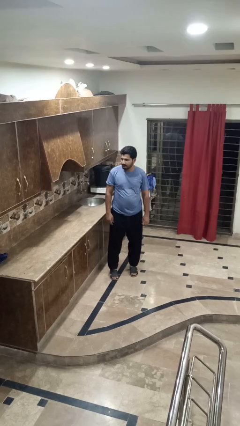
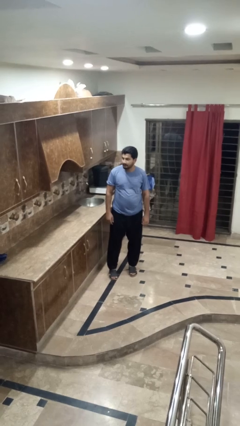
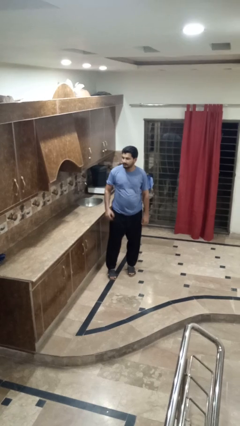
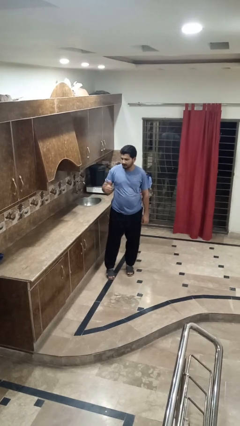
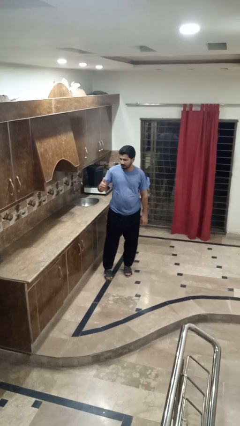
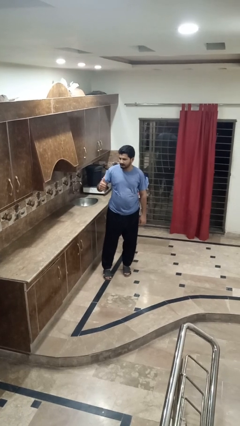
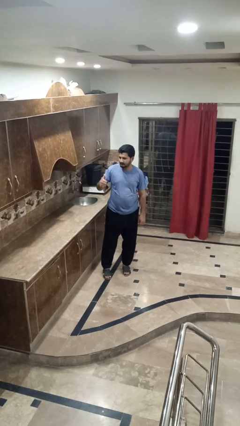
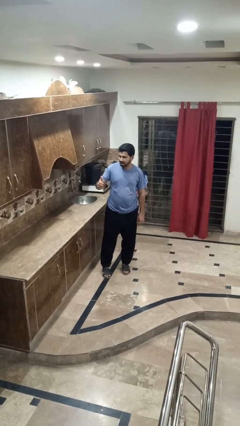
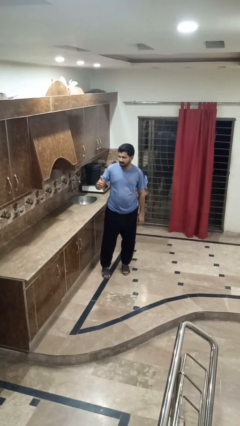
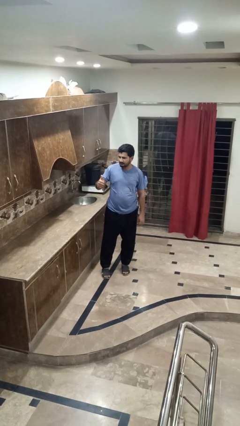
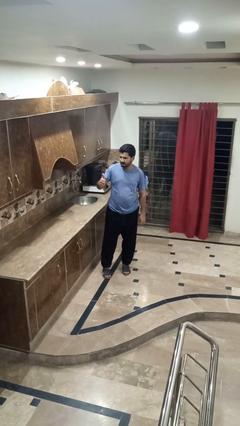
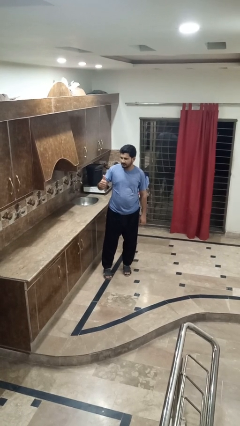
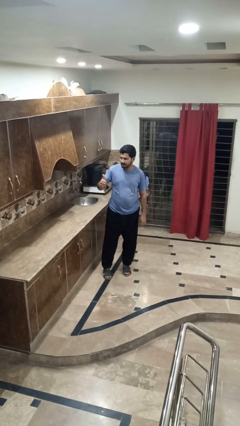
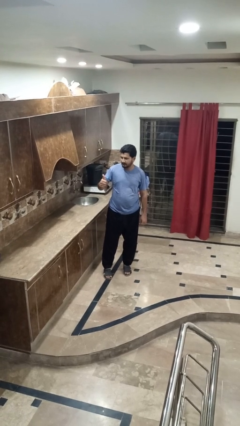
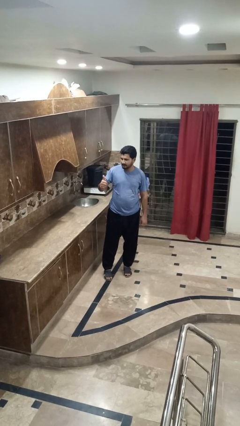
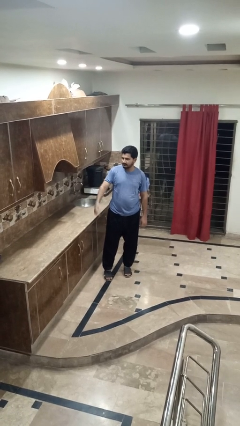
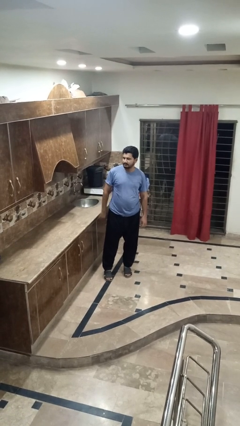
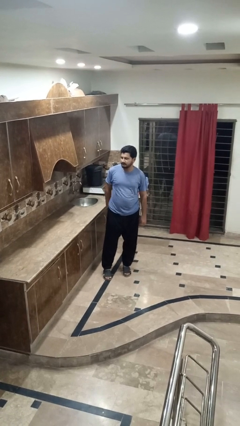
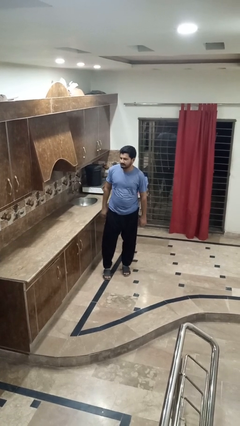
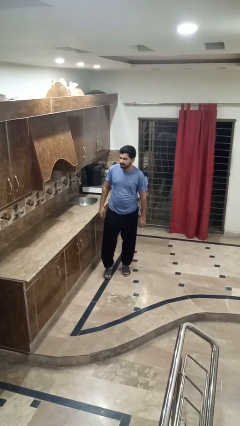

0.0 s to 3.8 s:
person gestures thumbs up

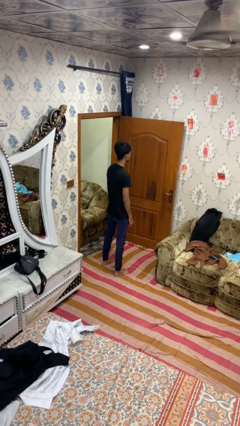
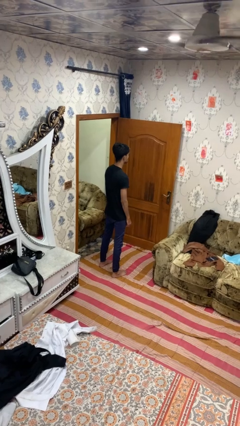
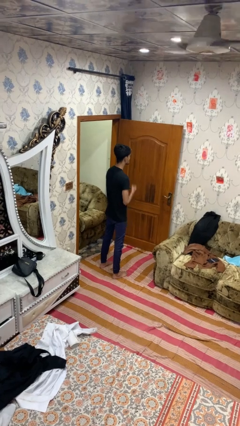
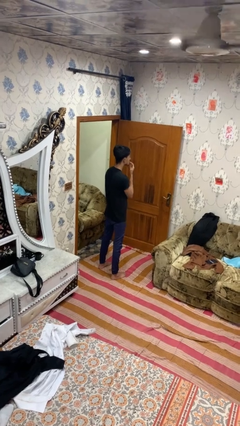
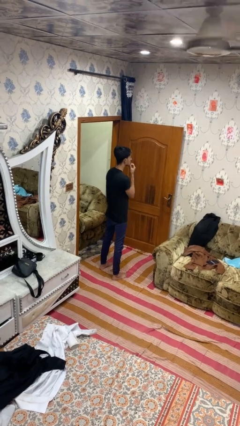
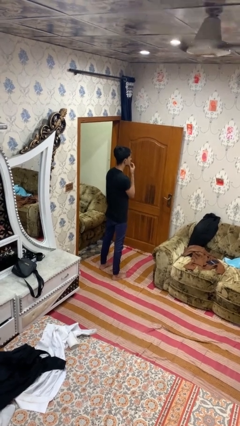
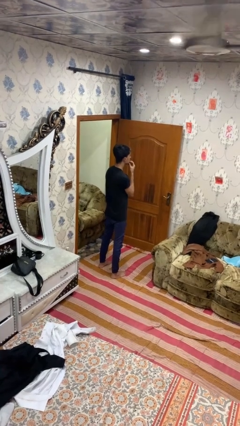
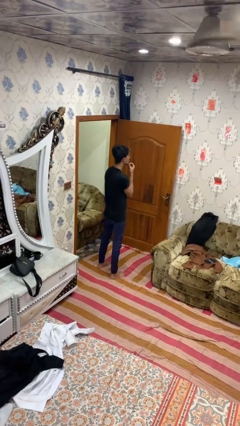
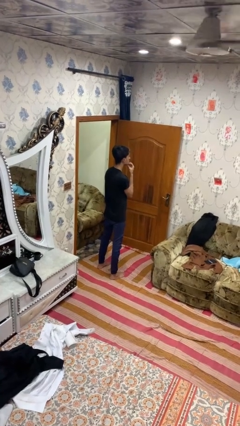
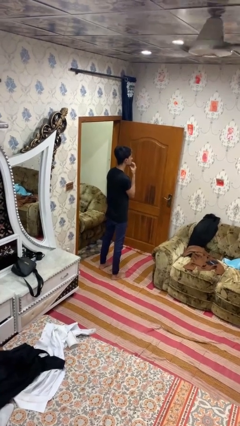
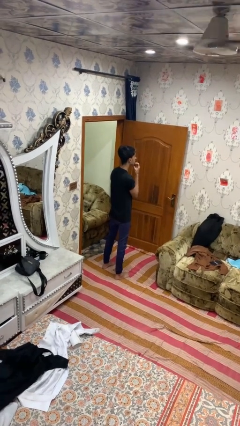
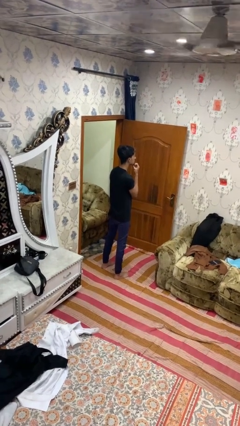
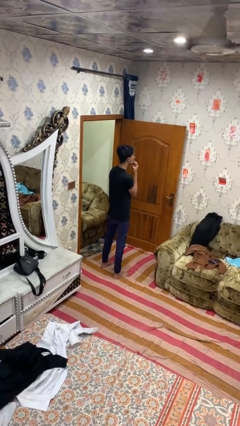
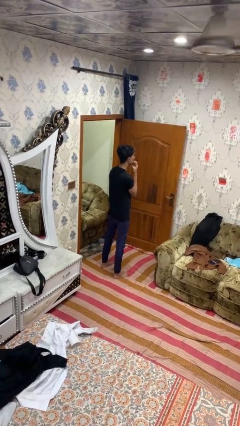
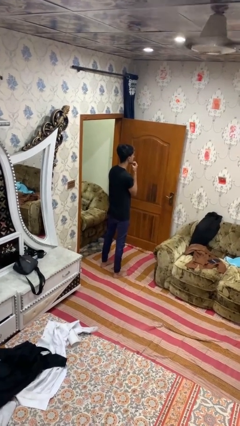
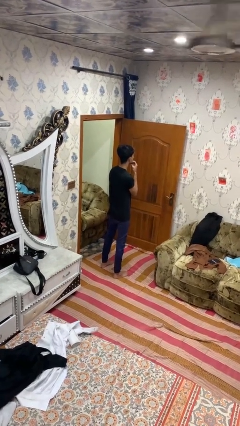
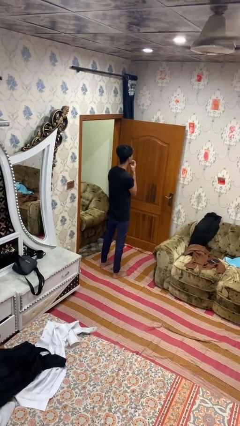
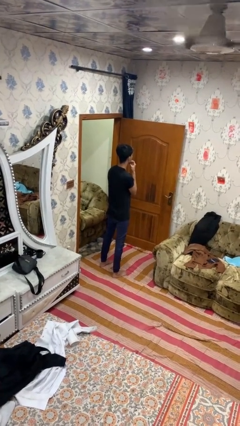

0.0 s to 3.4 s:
person strokes chin

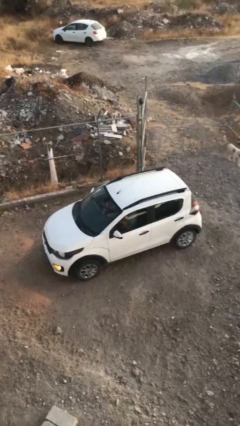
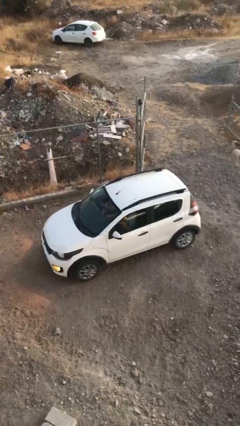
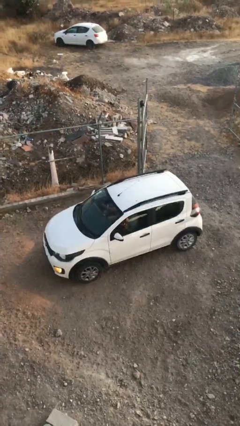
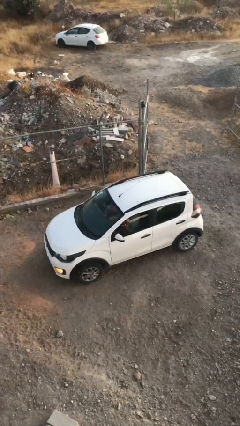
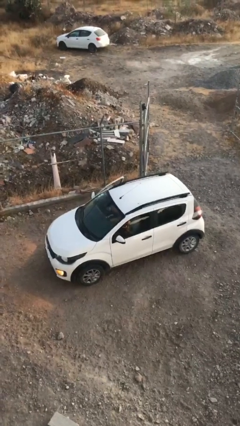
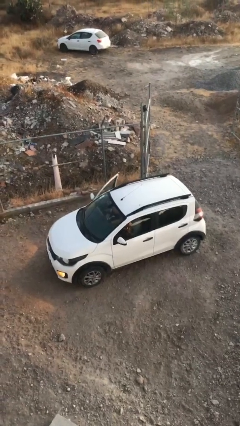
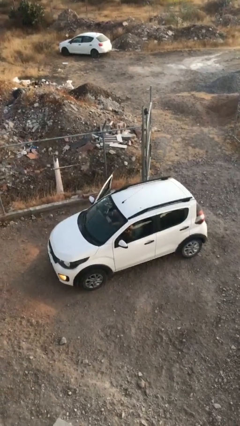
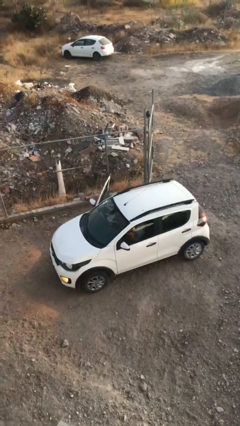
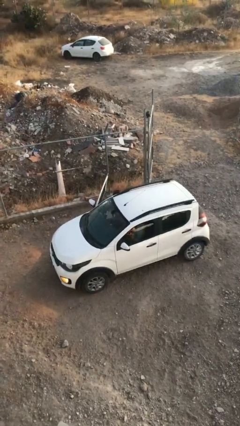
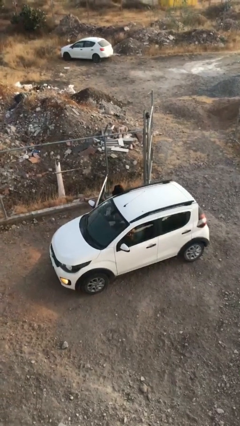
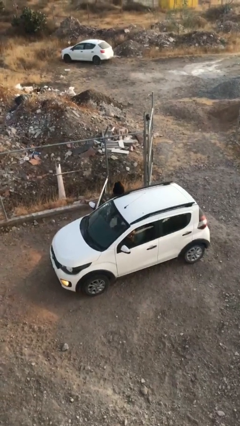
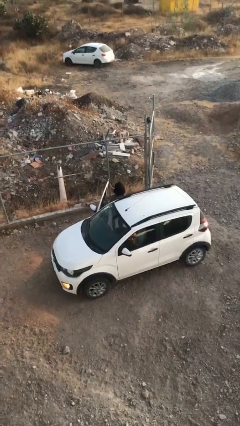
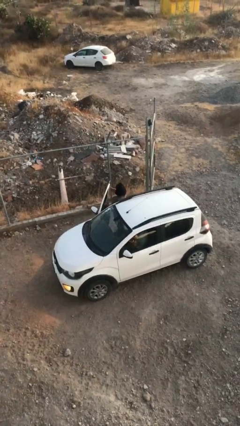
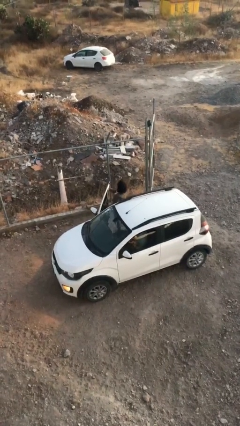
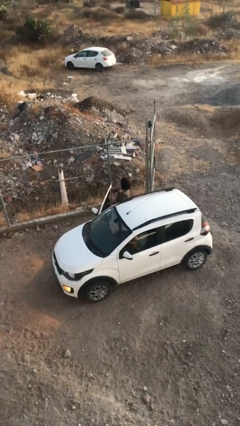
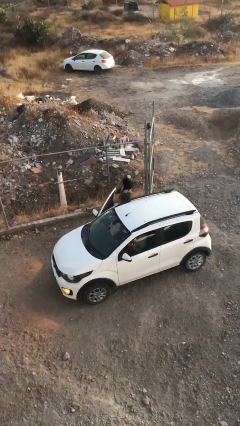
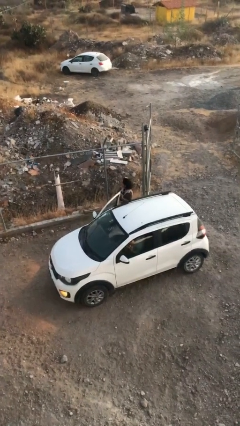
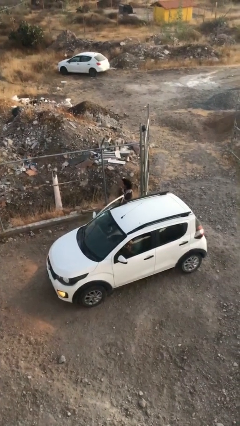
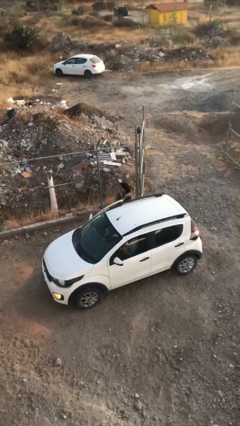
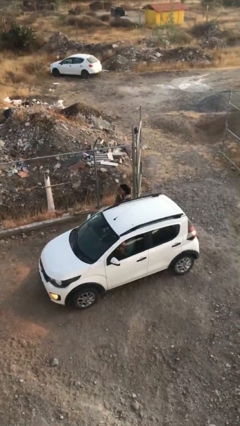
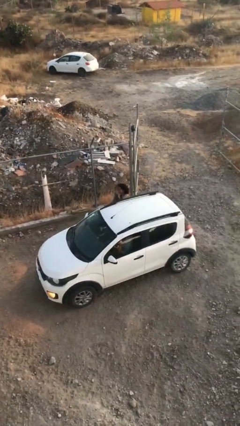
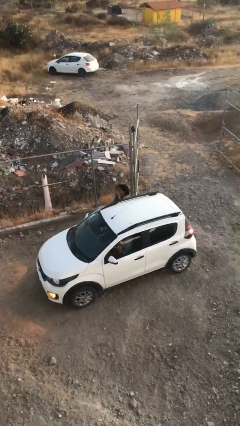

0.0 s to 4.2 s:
car drops off person

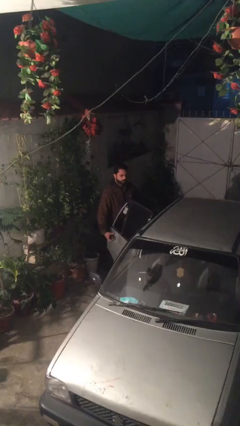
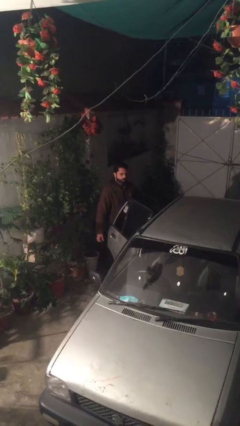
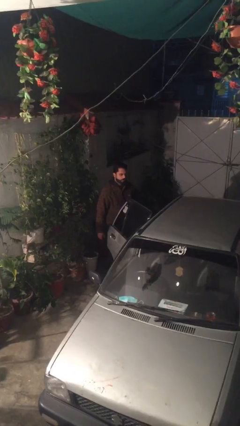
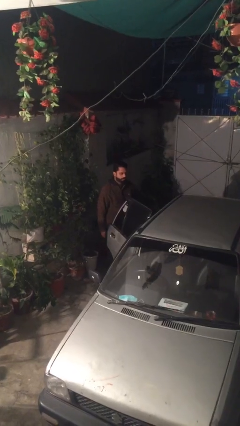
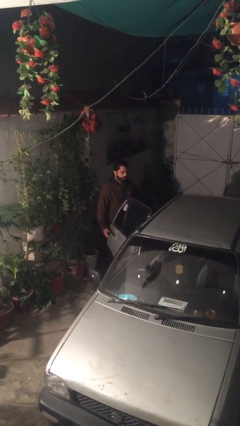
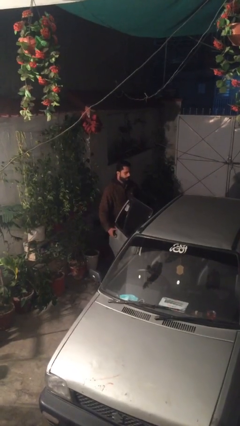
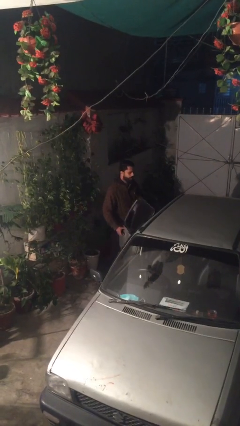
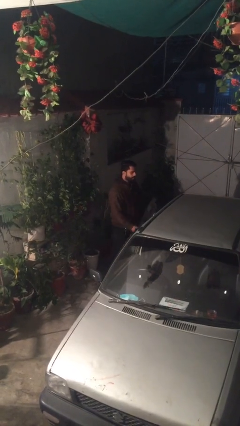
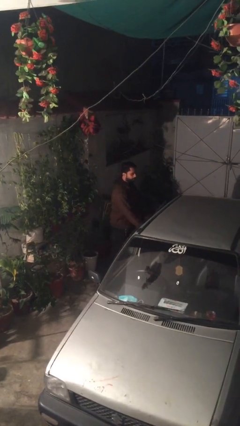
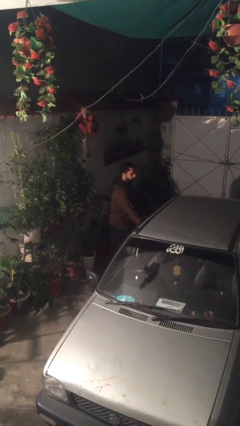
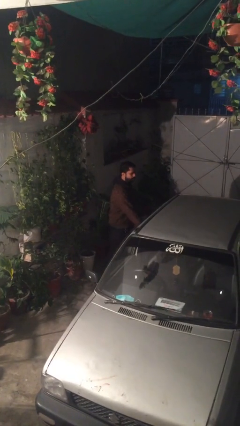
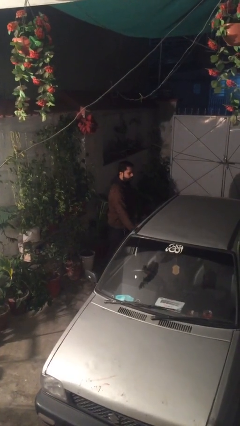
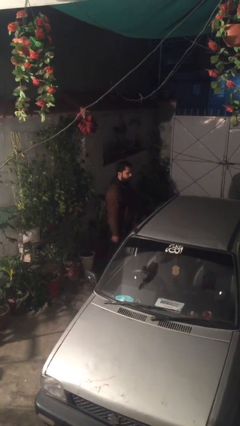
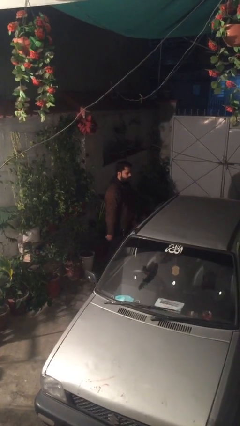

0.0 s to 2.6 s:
person closes car door

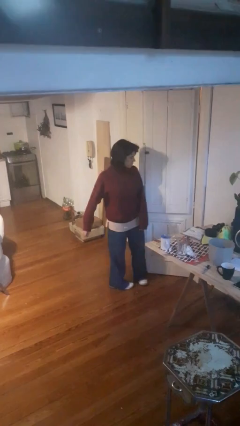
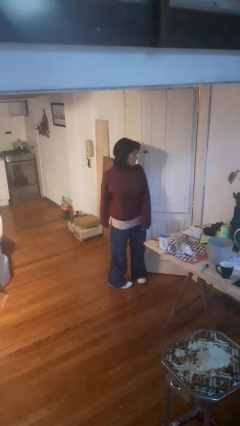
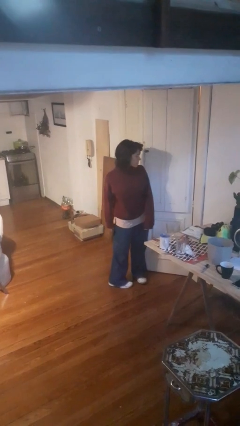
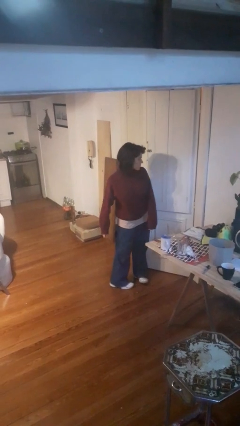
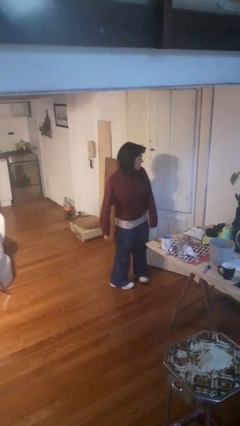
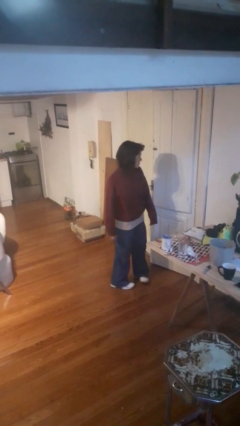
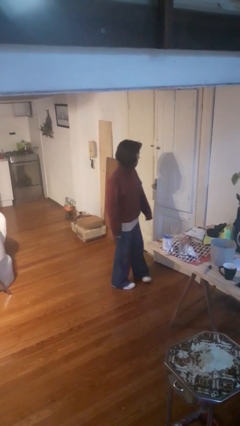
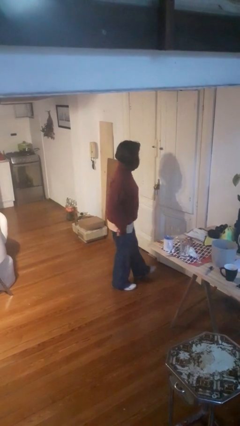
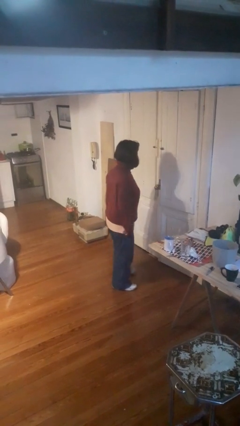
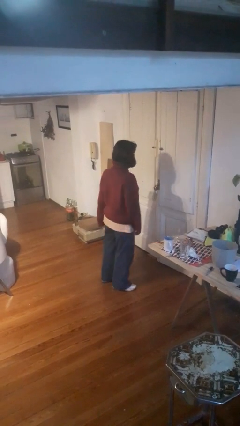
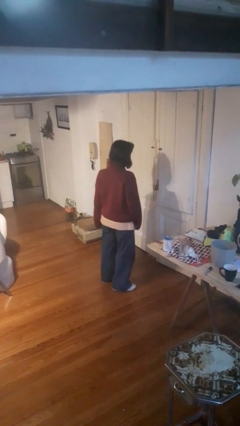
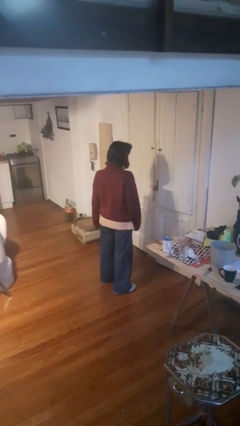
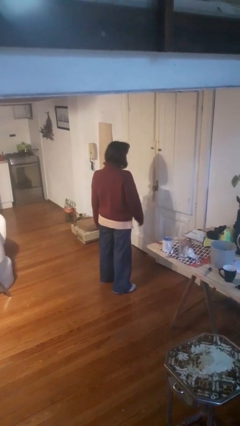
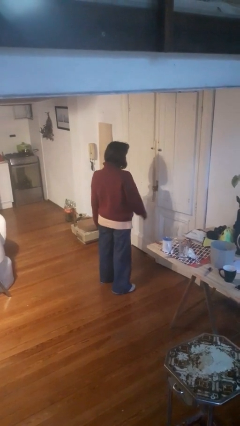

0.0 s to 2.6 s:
person closes door with hip

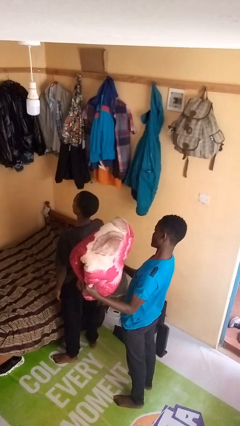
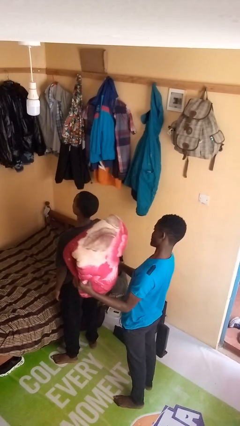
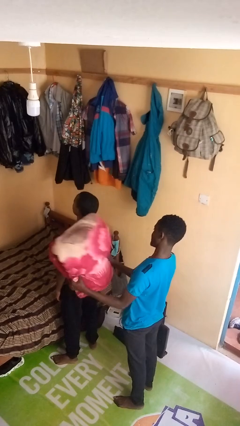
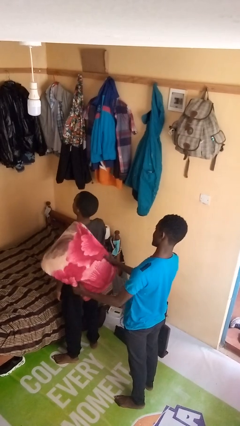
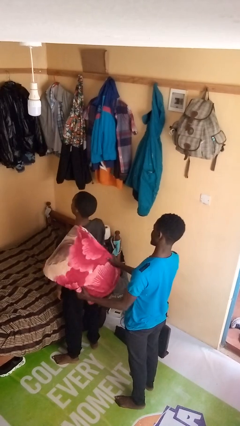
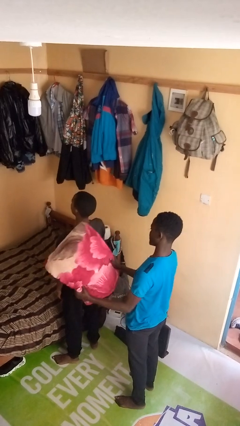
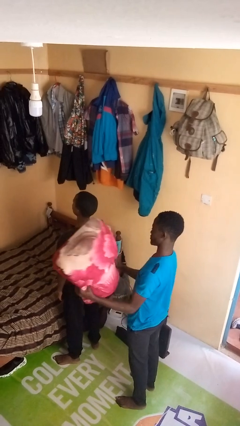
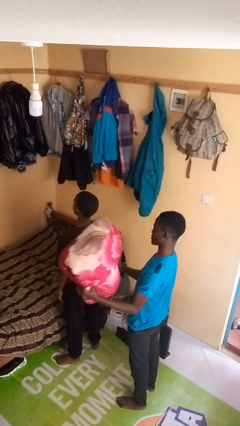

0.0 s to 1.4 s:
person hits person with pillow
